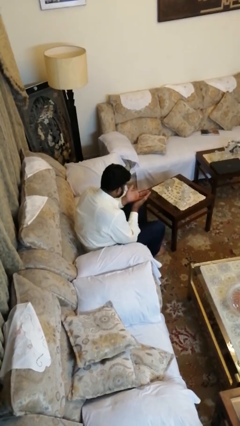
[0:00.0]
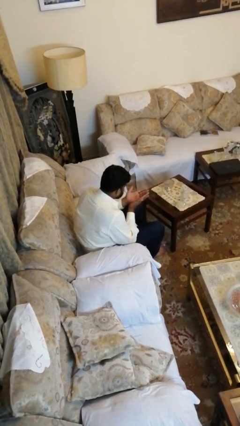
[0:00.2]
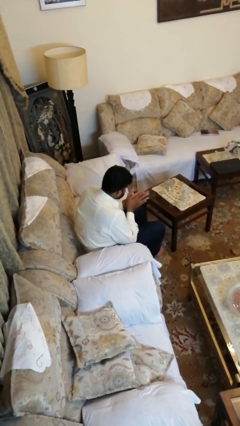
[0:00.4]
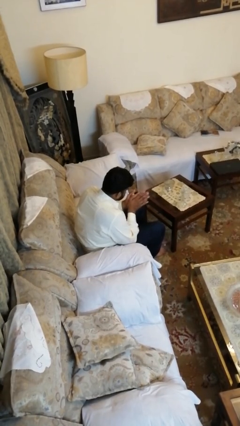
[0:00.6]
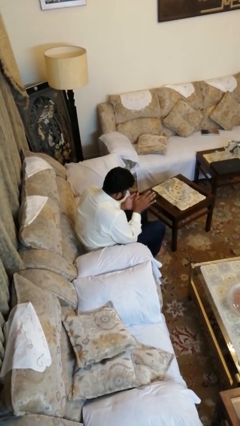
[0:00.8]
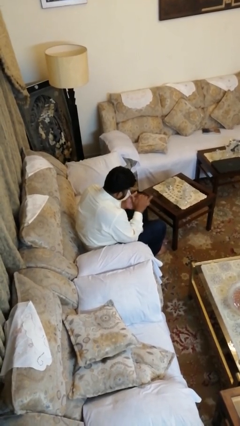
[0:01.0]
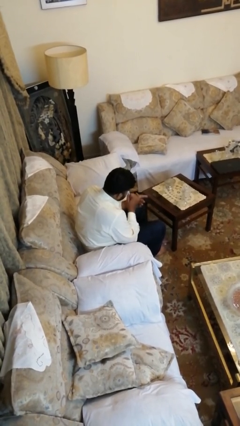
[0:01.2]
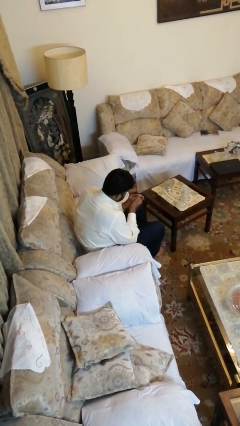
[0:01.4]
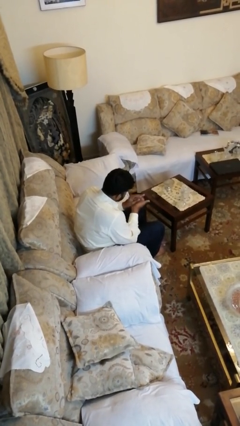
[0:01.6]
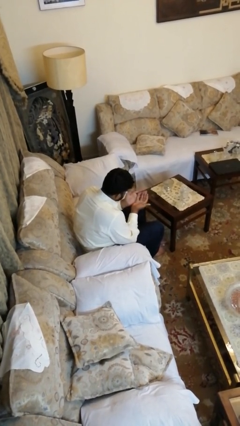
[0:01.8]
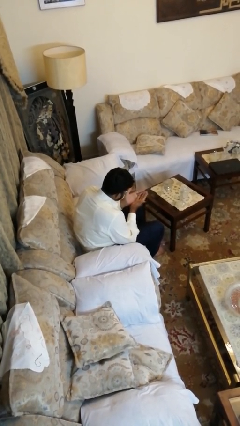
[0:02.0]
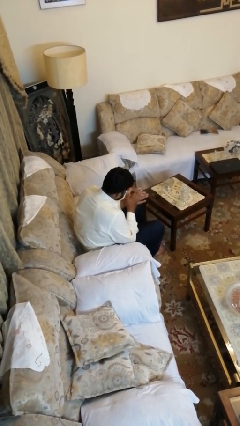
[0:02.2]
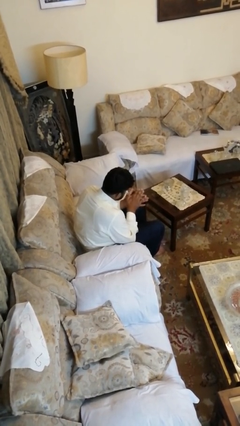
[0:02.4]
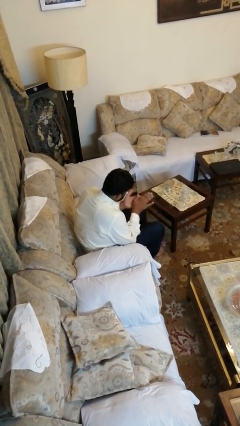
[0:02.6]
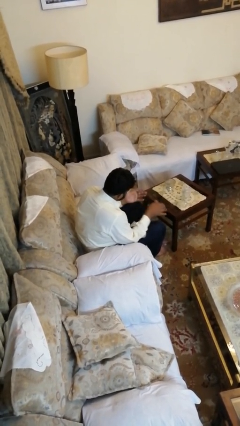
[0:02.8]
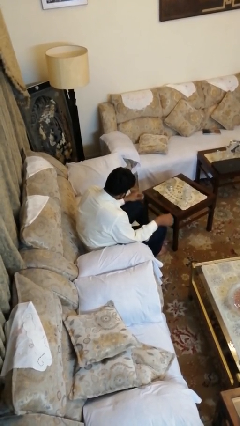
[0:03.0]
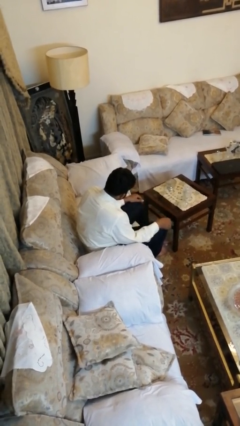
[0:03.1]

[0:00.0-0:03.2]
person looks at hands in lap

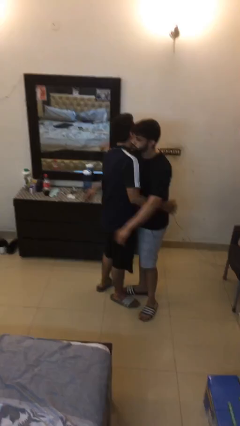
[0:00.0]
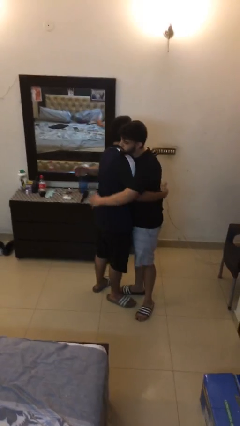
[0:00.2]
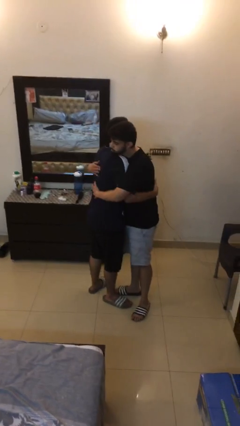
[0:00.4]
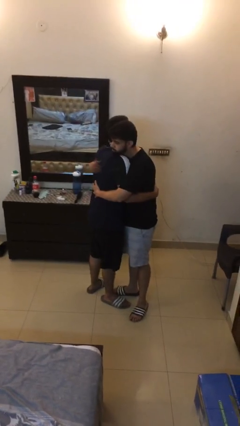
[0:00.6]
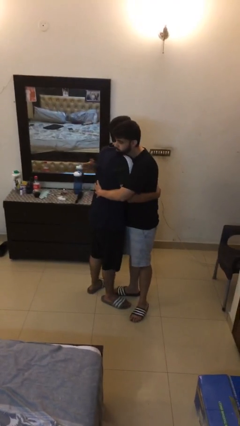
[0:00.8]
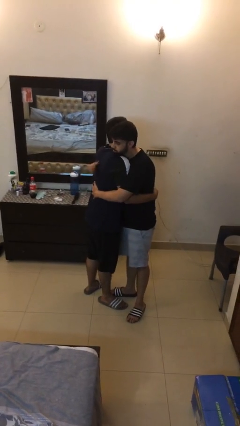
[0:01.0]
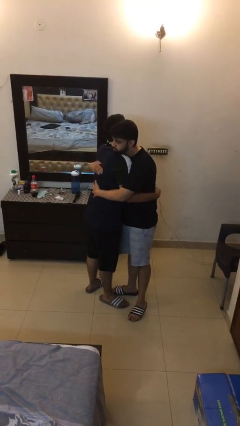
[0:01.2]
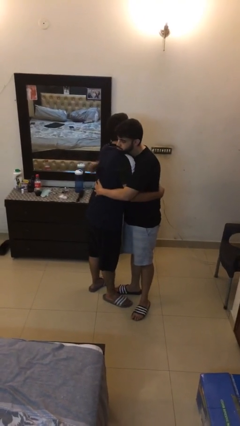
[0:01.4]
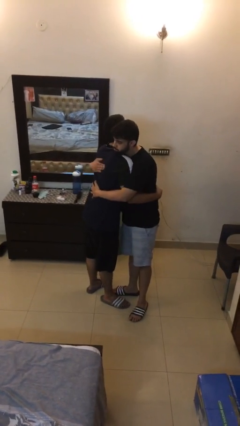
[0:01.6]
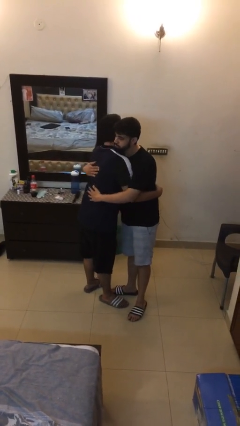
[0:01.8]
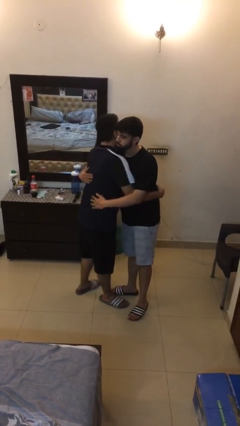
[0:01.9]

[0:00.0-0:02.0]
person embraces person

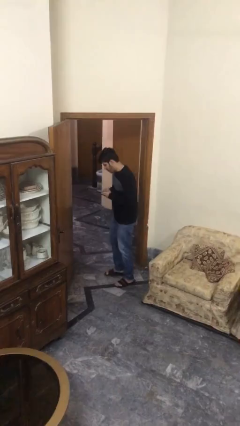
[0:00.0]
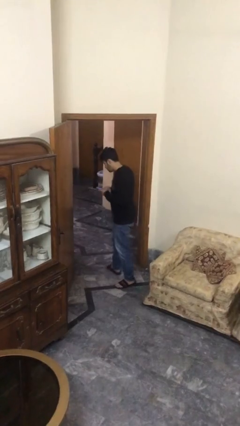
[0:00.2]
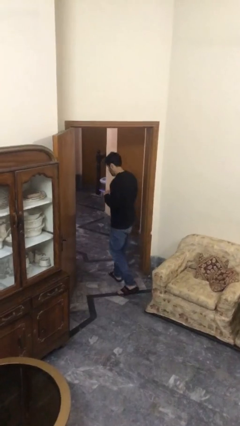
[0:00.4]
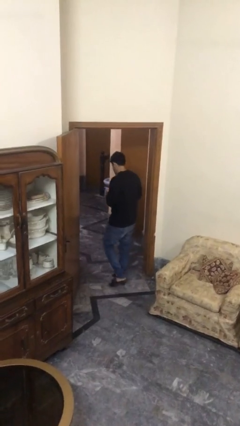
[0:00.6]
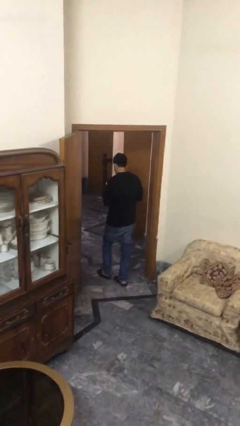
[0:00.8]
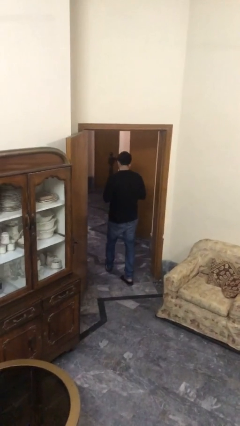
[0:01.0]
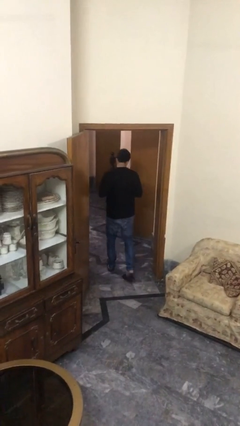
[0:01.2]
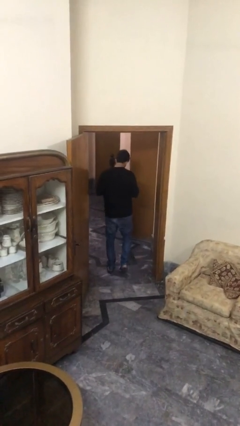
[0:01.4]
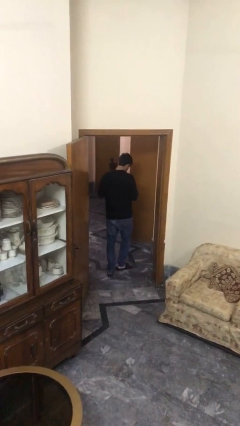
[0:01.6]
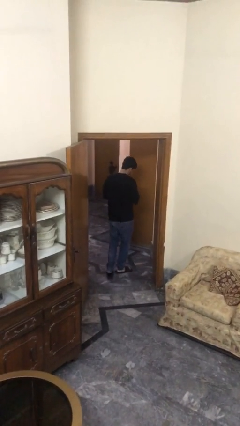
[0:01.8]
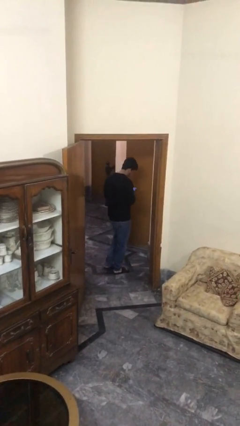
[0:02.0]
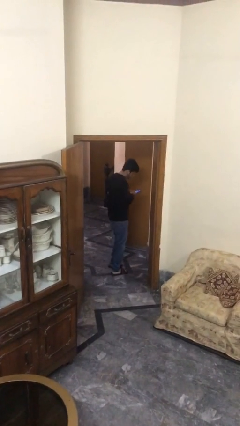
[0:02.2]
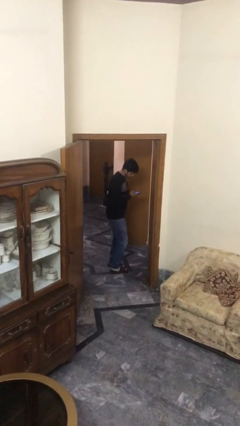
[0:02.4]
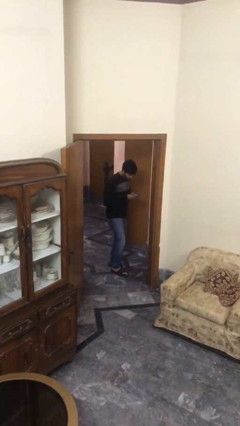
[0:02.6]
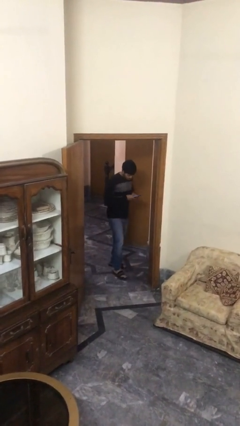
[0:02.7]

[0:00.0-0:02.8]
person exits scene through structure

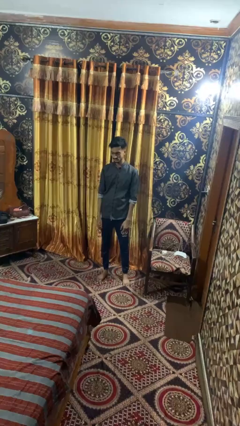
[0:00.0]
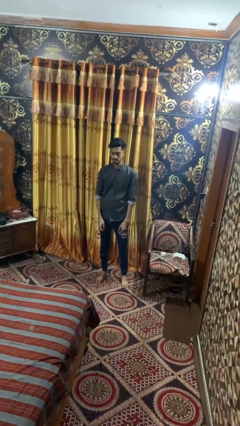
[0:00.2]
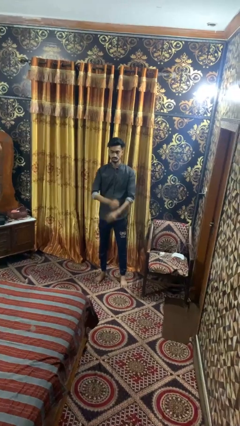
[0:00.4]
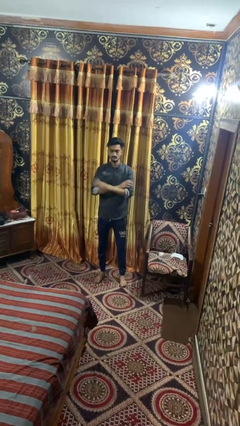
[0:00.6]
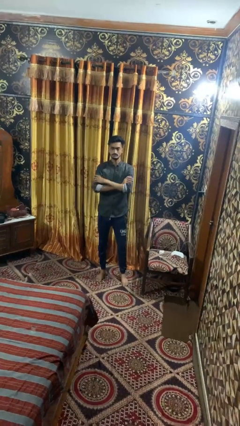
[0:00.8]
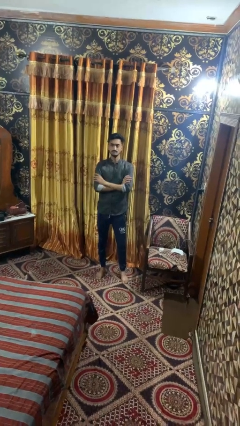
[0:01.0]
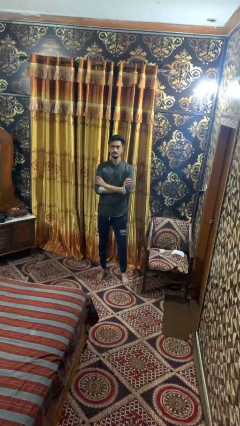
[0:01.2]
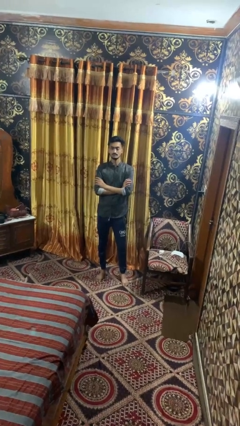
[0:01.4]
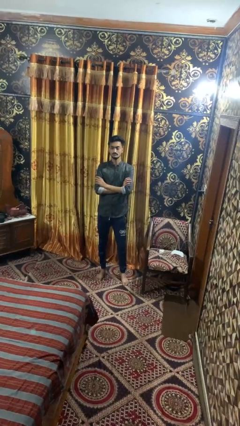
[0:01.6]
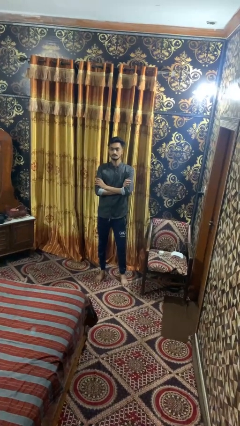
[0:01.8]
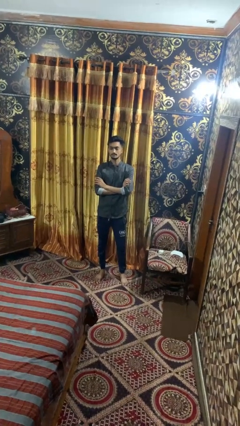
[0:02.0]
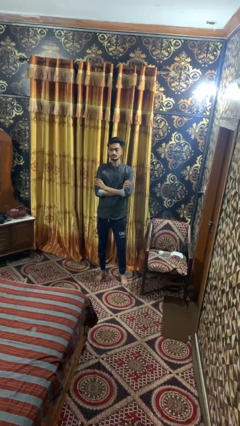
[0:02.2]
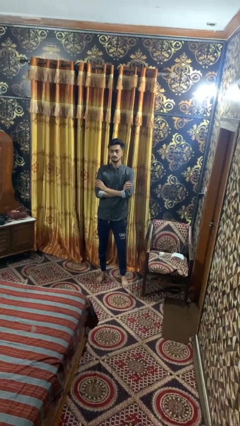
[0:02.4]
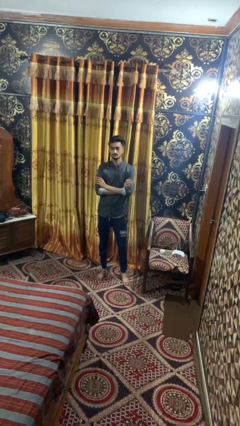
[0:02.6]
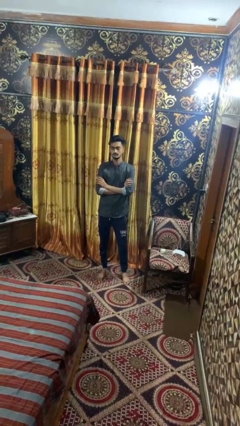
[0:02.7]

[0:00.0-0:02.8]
person crosses arms

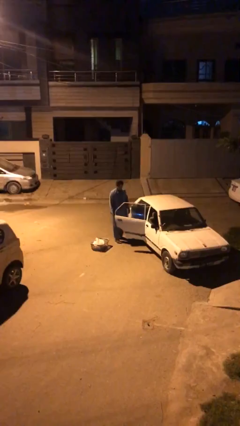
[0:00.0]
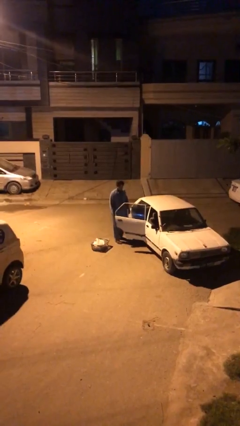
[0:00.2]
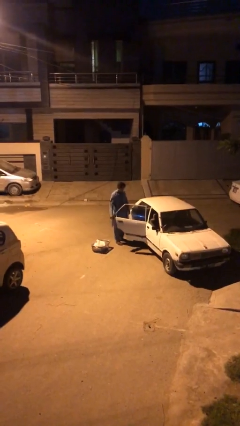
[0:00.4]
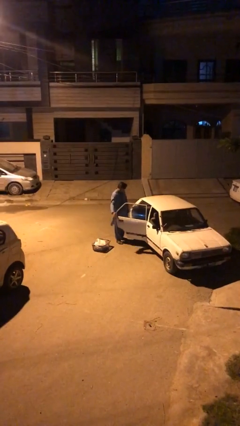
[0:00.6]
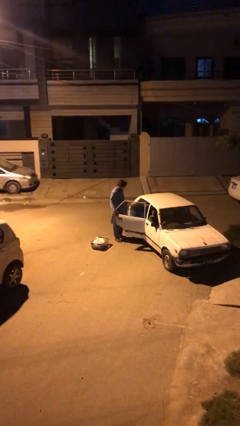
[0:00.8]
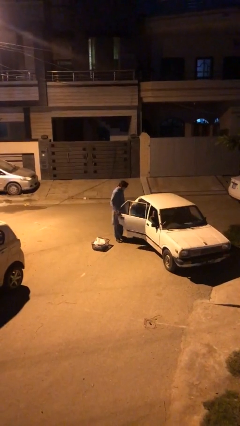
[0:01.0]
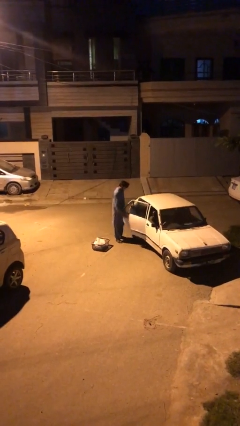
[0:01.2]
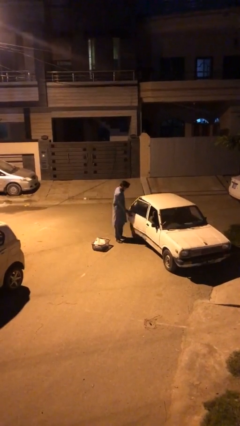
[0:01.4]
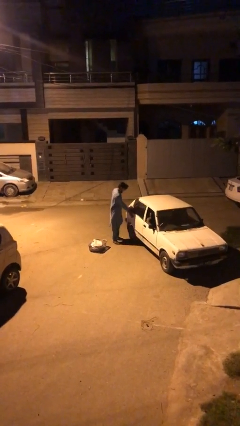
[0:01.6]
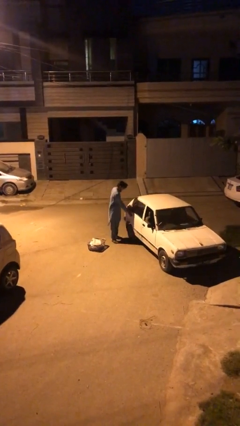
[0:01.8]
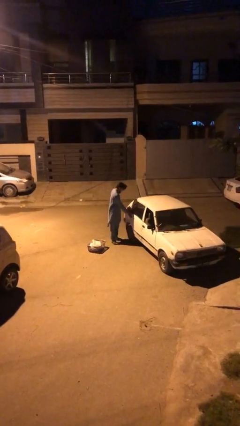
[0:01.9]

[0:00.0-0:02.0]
person closes car door

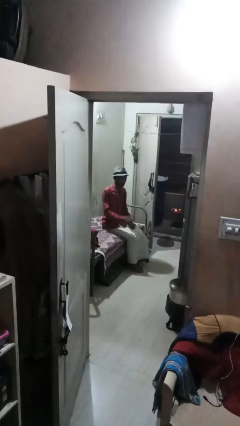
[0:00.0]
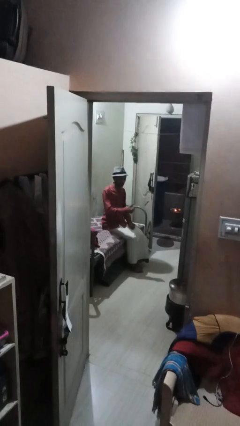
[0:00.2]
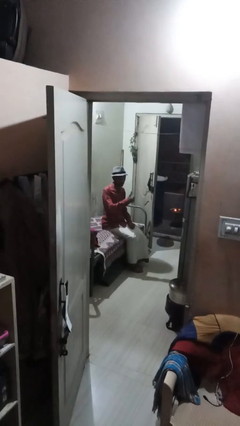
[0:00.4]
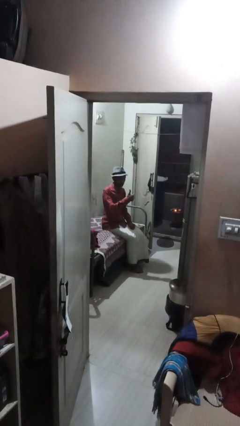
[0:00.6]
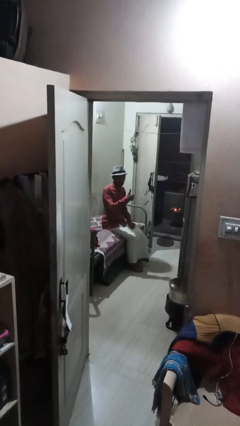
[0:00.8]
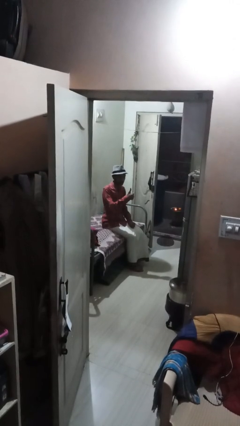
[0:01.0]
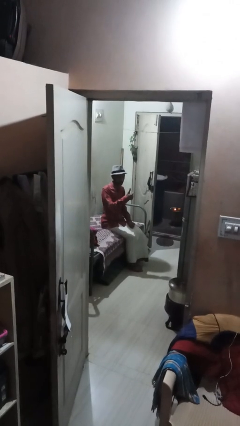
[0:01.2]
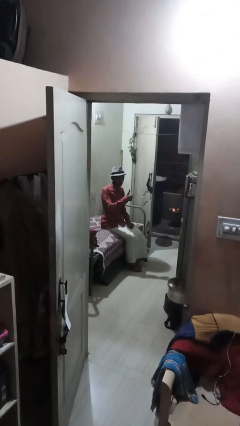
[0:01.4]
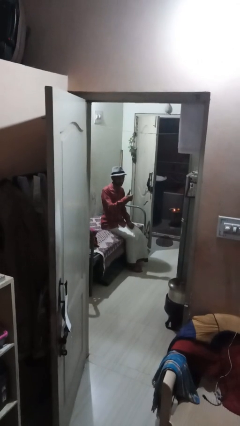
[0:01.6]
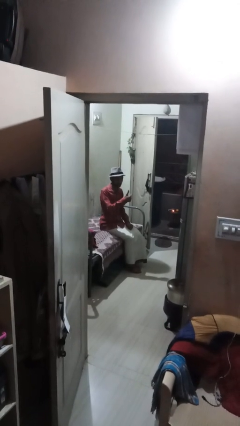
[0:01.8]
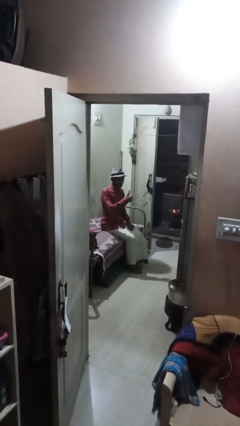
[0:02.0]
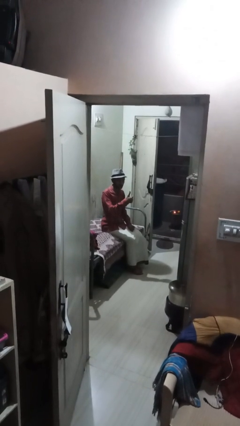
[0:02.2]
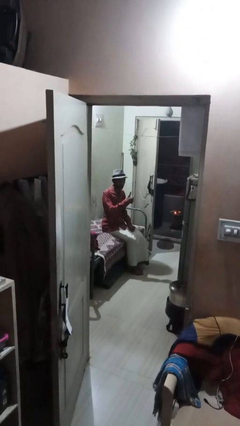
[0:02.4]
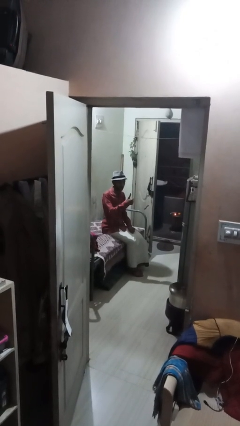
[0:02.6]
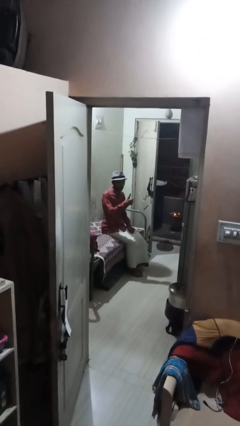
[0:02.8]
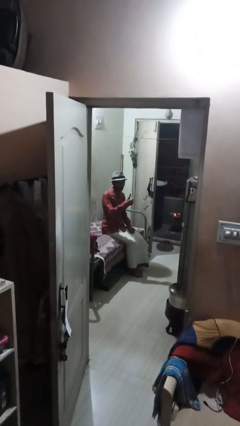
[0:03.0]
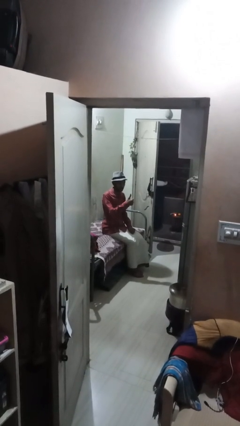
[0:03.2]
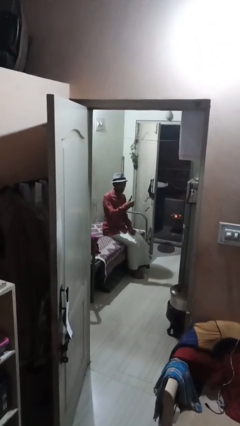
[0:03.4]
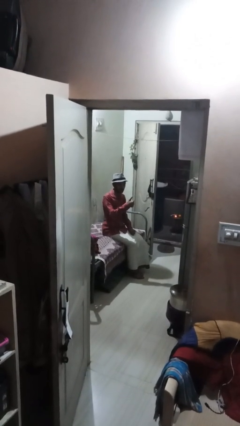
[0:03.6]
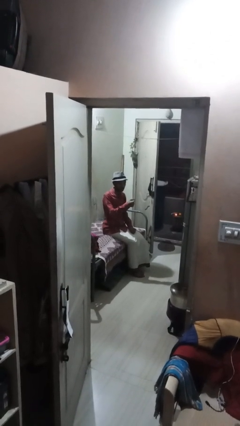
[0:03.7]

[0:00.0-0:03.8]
person gestures thumbs up

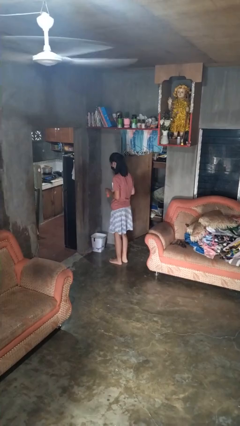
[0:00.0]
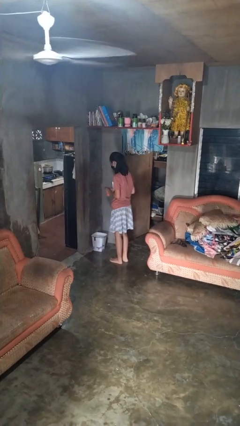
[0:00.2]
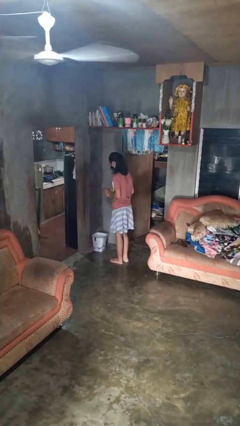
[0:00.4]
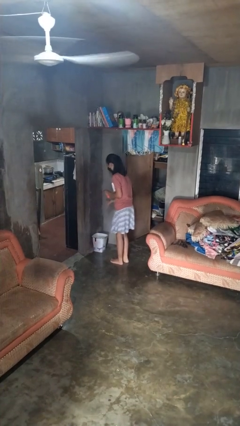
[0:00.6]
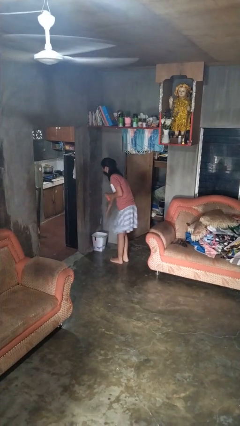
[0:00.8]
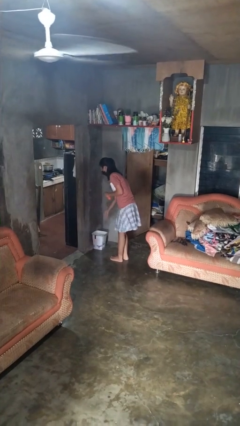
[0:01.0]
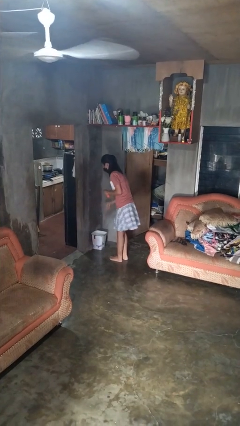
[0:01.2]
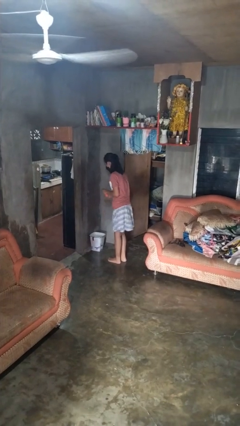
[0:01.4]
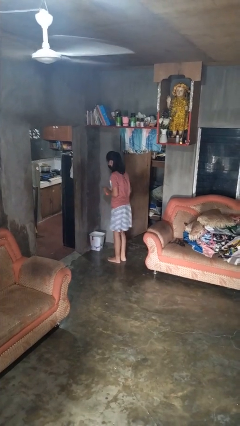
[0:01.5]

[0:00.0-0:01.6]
person discards trash
